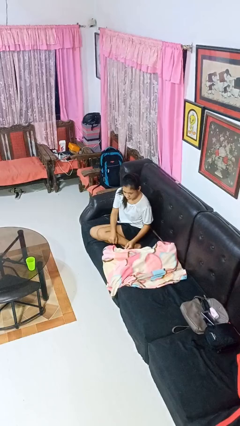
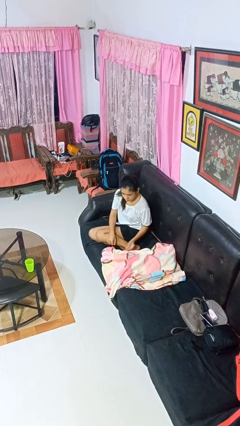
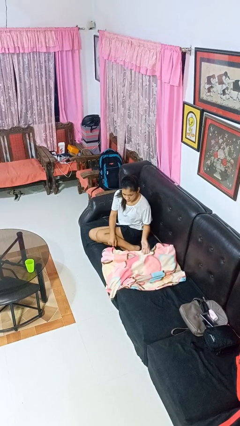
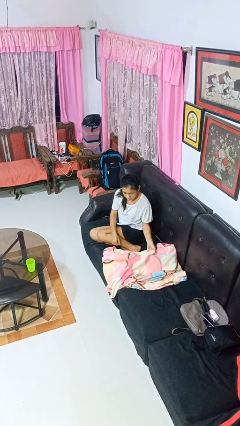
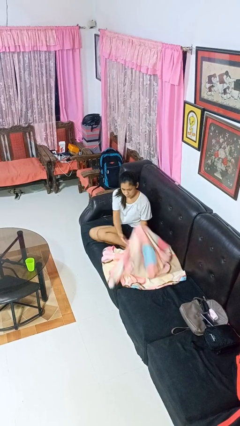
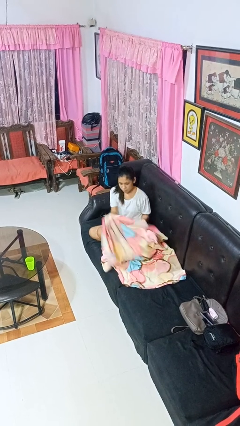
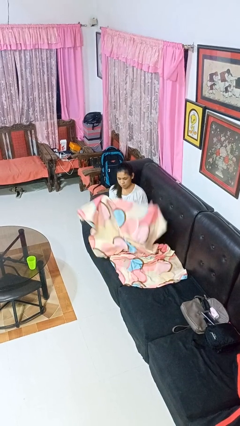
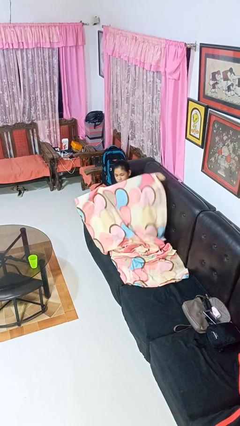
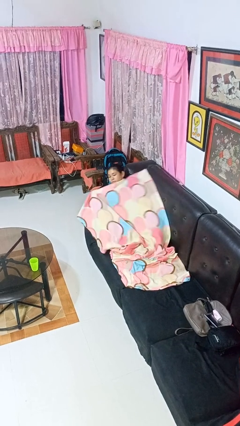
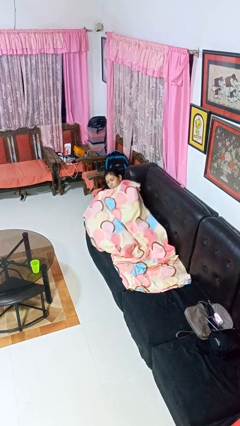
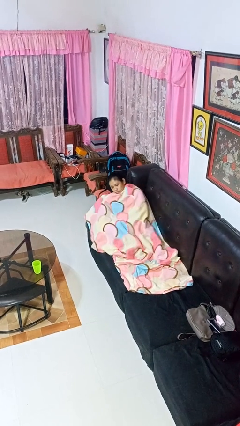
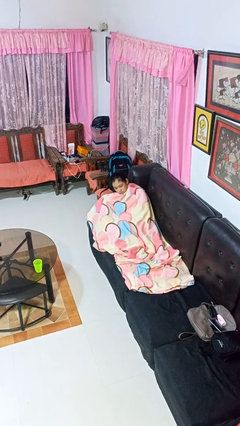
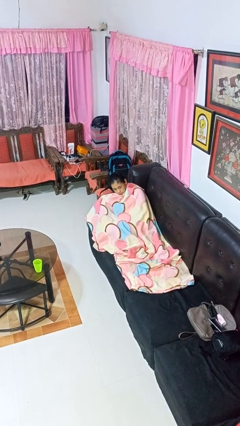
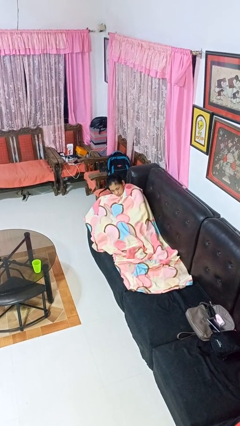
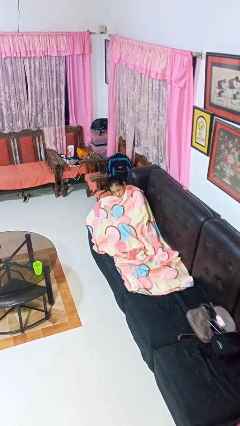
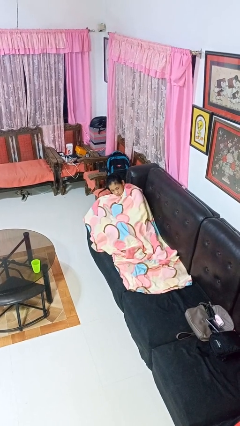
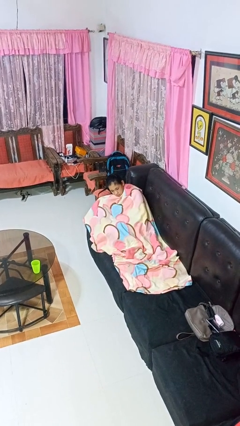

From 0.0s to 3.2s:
person covers with blanket

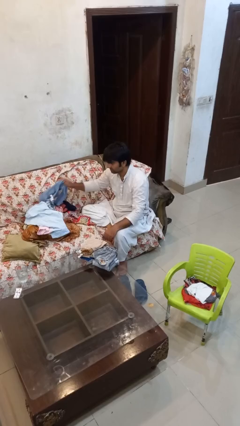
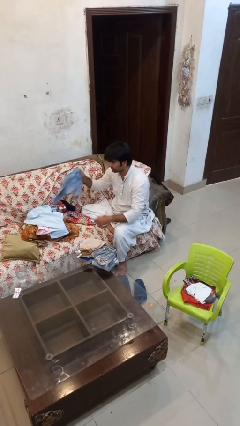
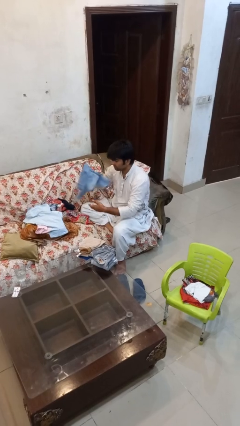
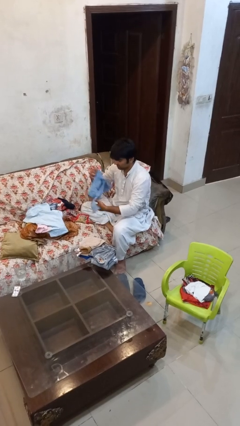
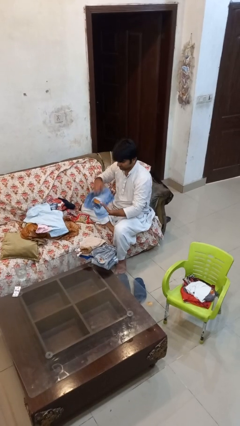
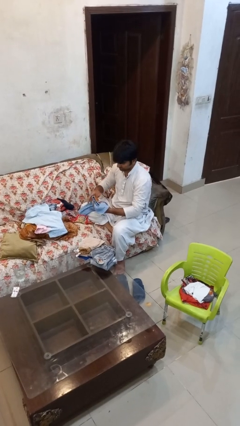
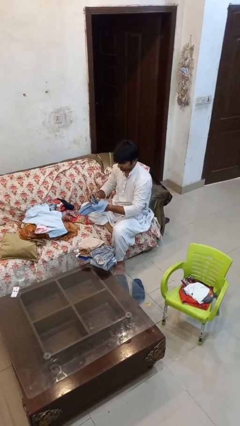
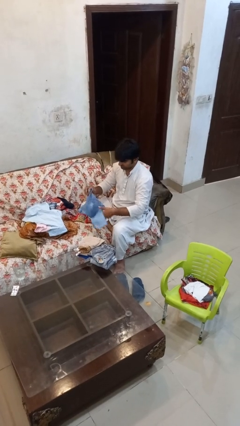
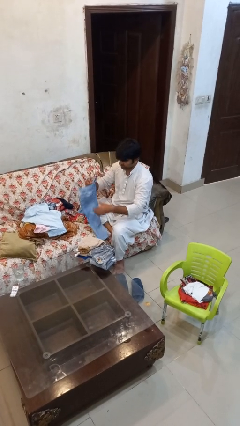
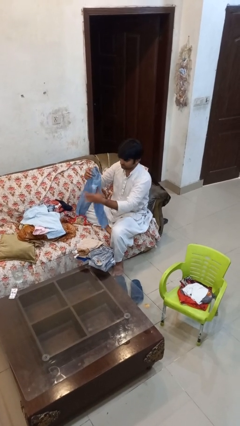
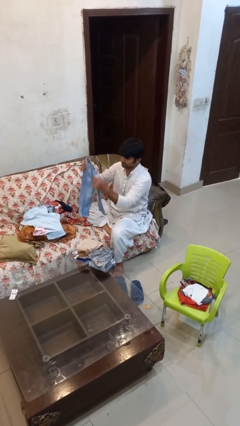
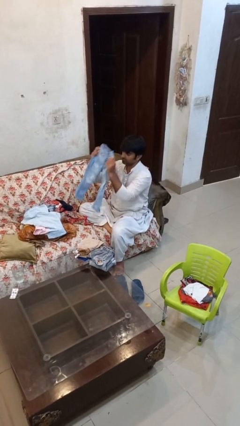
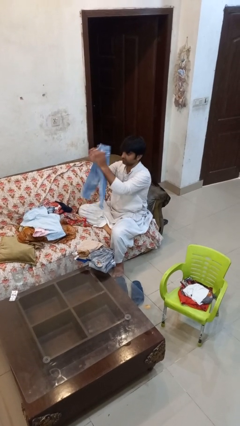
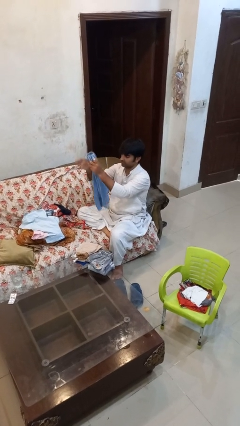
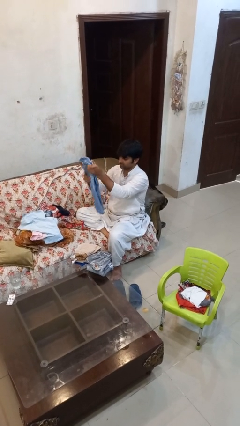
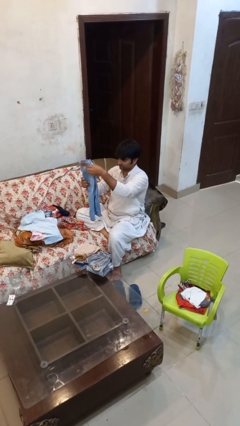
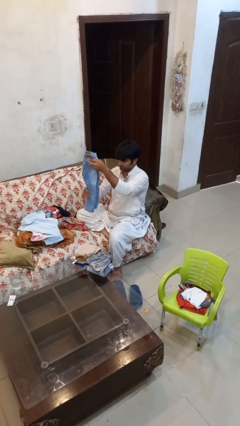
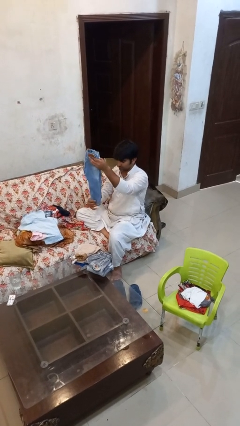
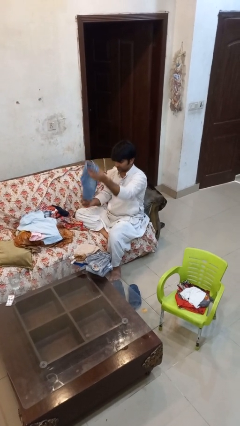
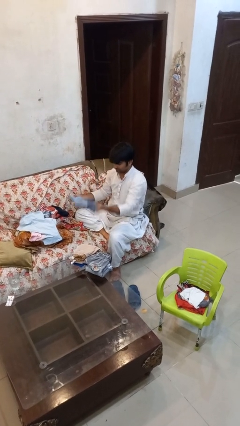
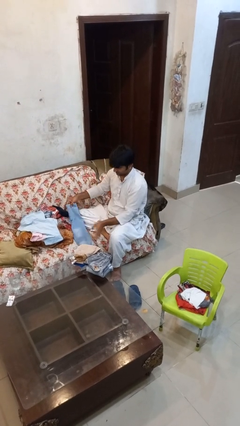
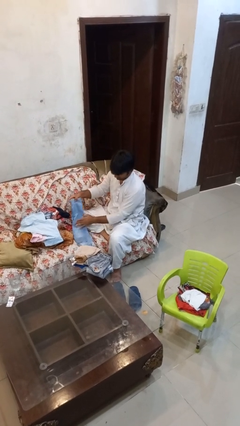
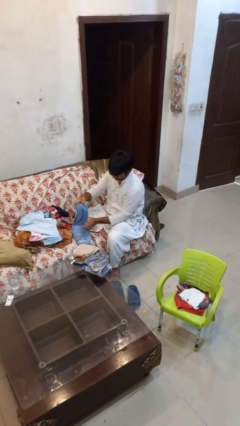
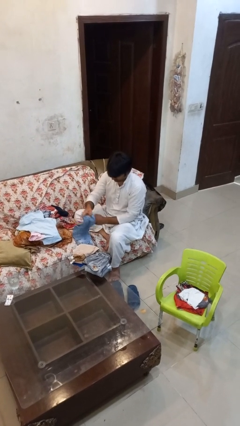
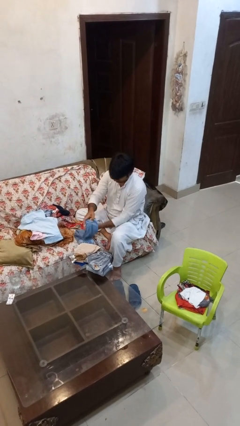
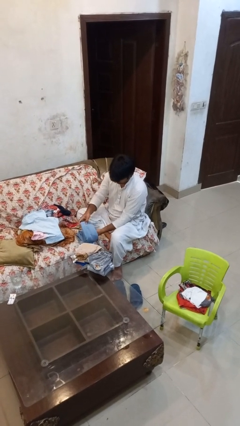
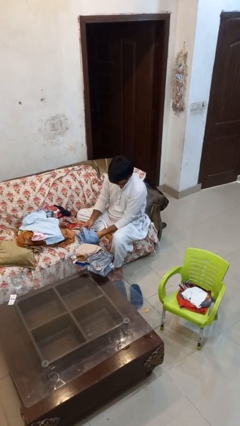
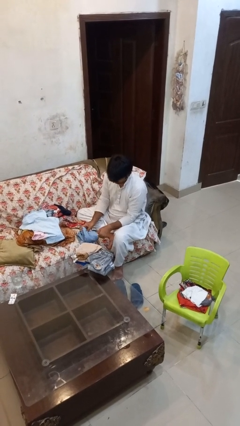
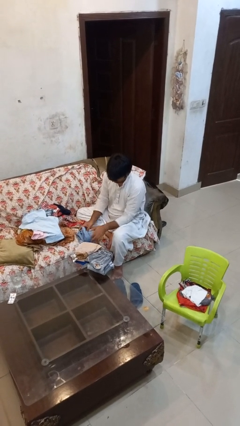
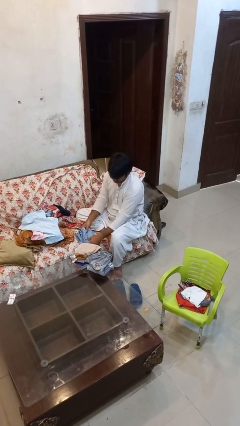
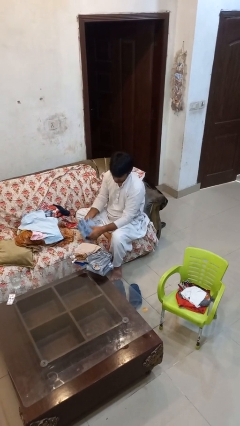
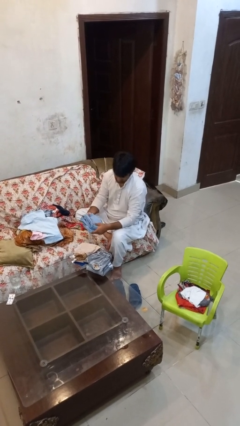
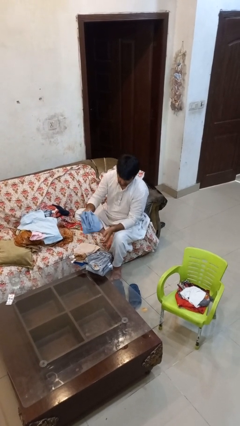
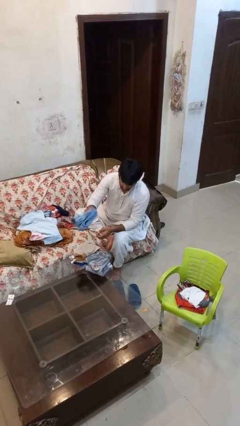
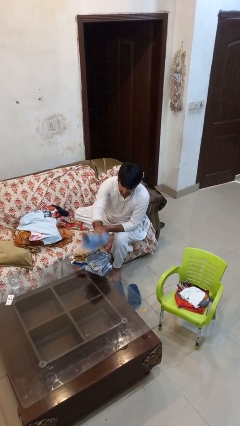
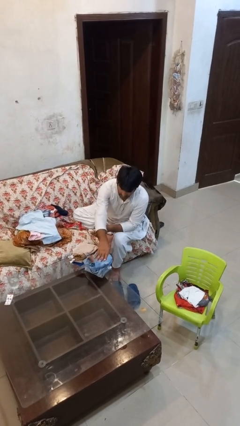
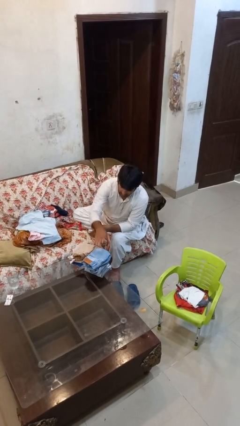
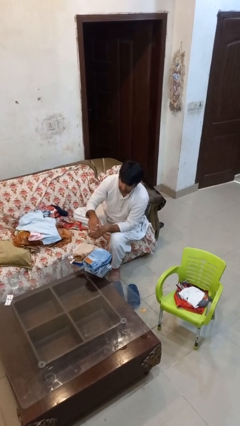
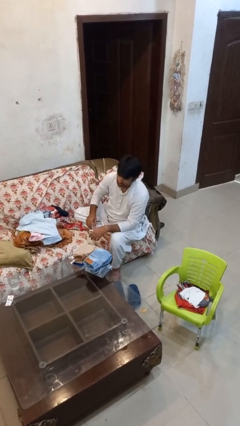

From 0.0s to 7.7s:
person folds pants

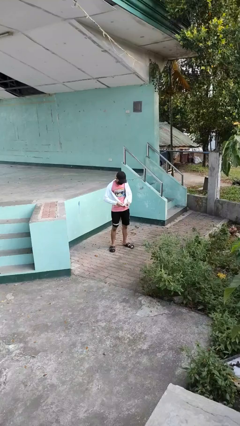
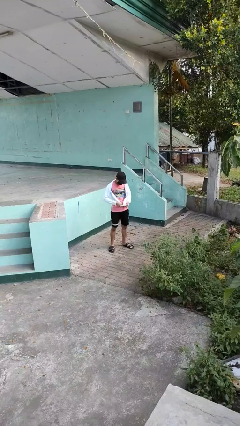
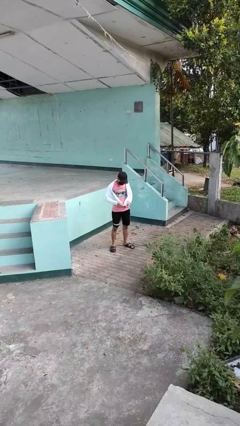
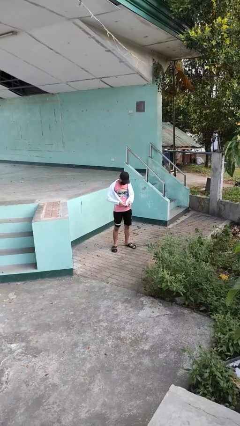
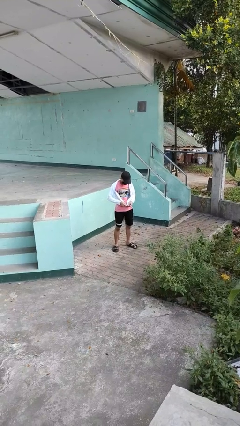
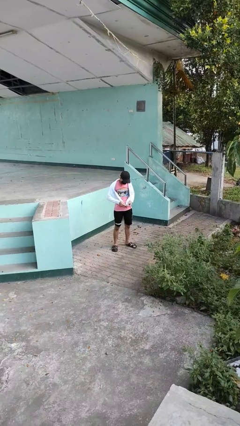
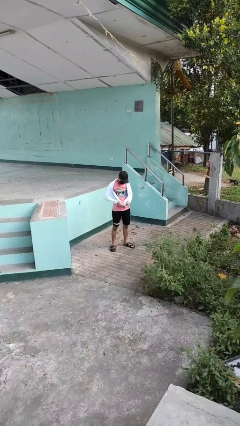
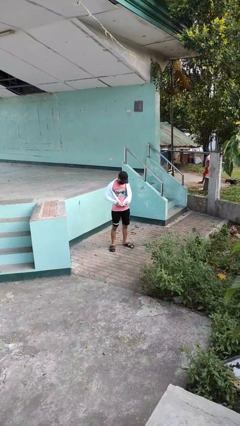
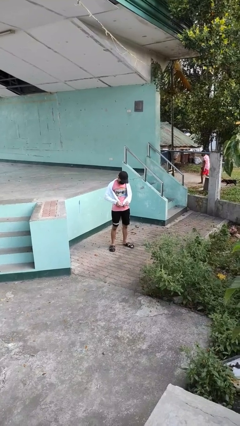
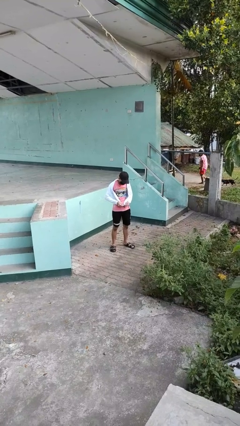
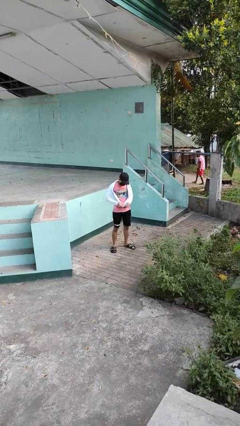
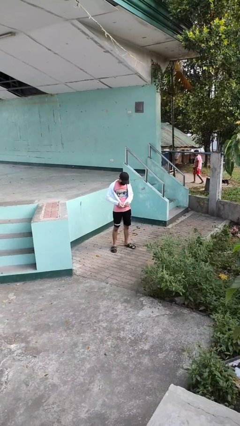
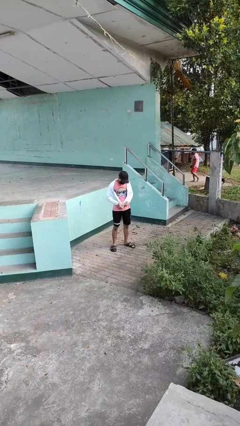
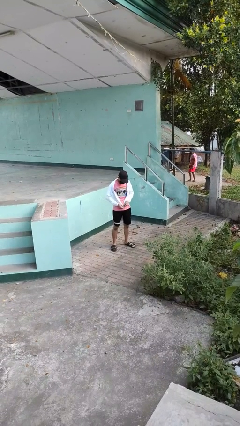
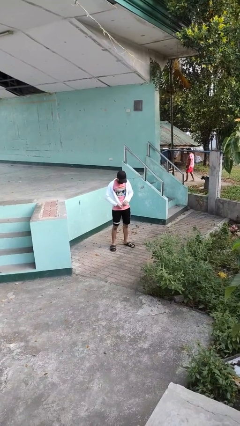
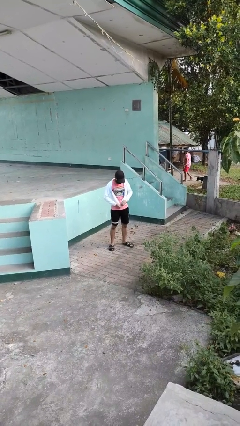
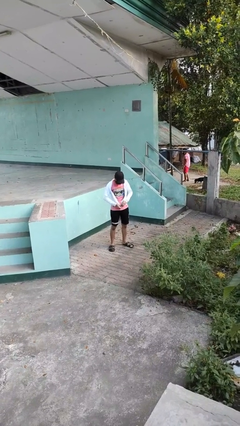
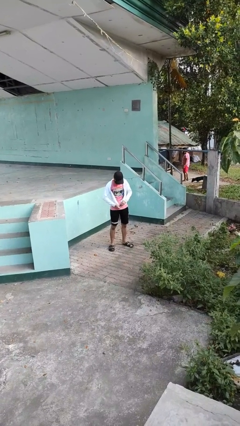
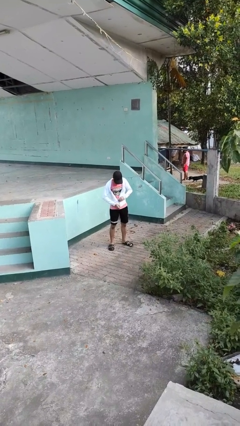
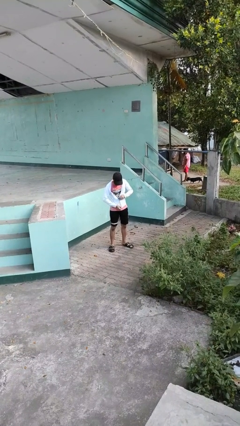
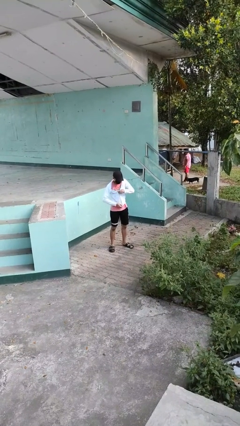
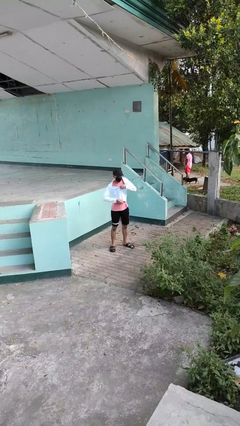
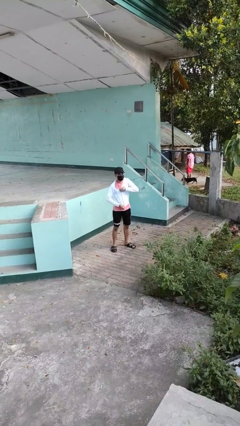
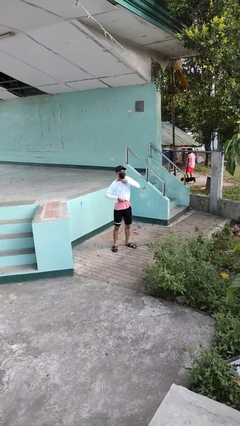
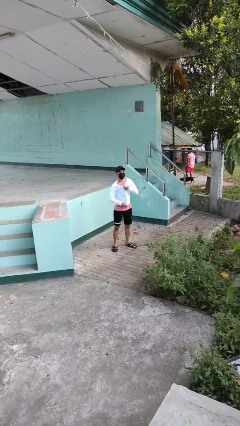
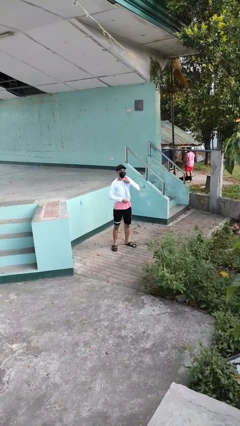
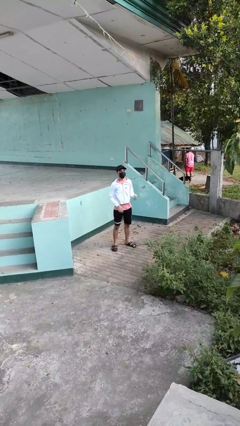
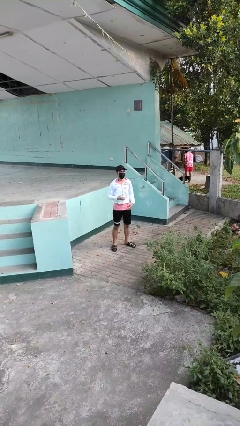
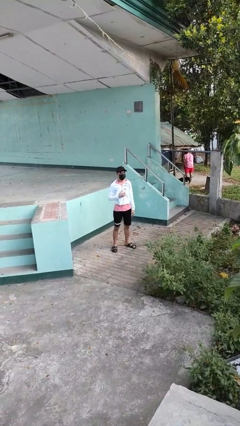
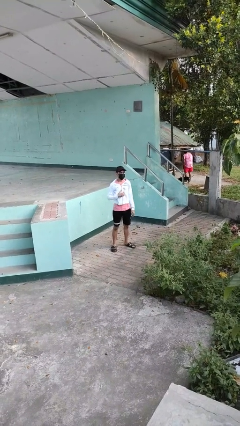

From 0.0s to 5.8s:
person zips up jacket

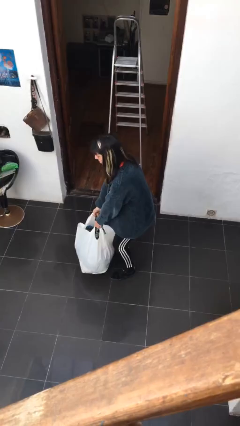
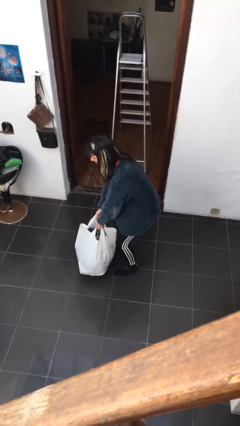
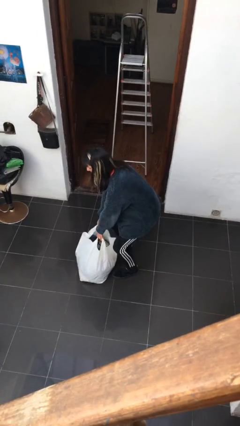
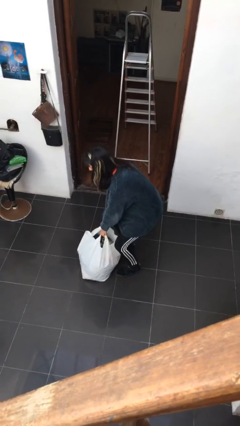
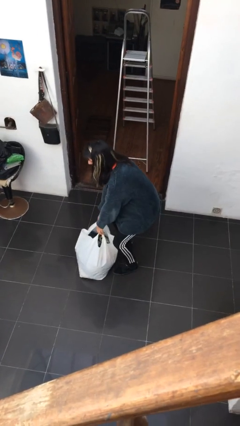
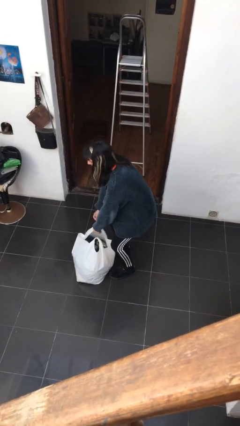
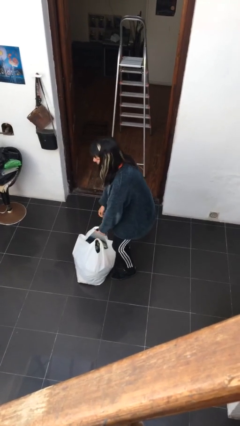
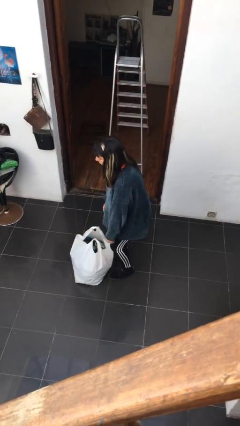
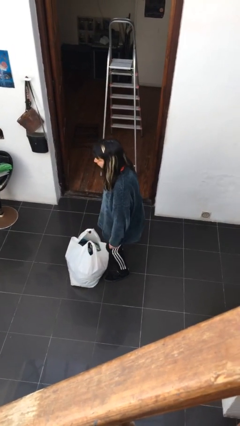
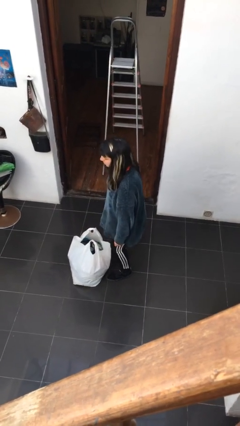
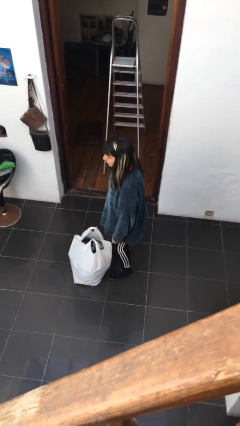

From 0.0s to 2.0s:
person puts down object on floor
